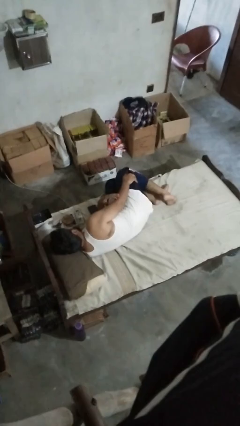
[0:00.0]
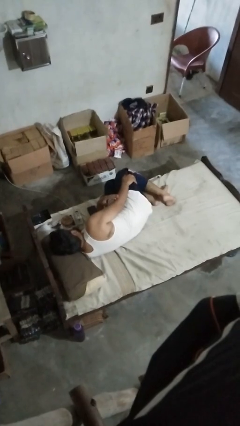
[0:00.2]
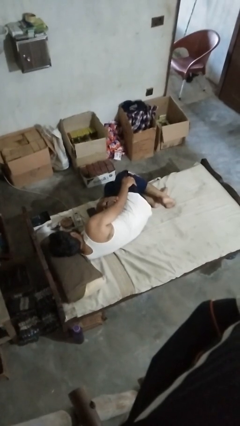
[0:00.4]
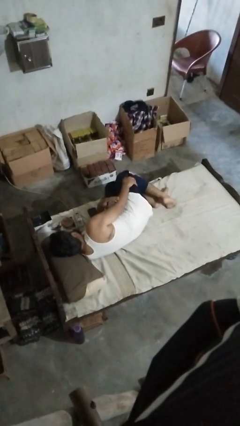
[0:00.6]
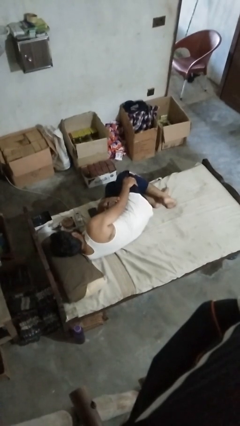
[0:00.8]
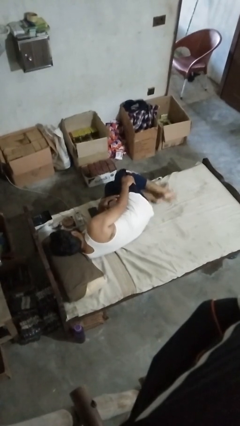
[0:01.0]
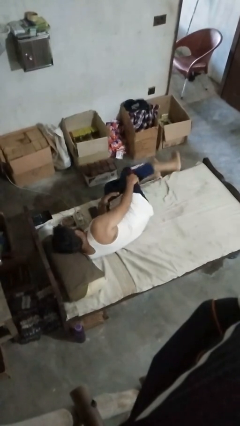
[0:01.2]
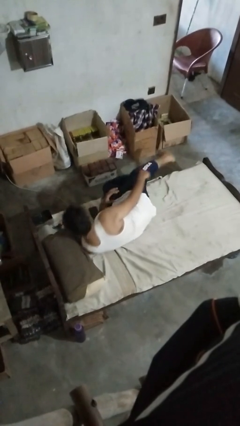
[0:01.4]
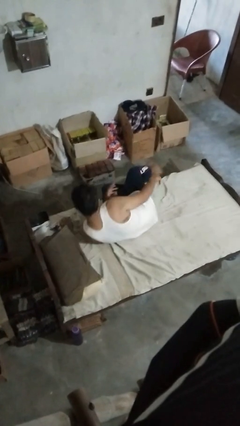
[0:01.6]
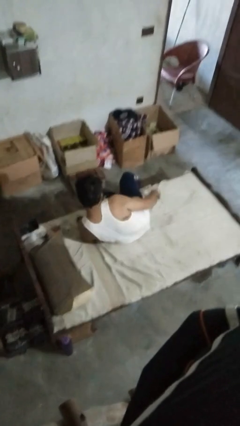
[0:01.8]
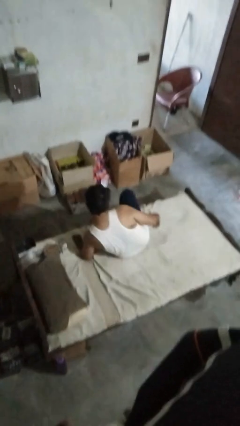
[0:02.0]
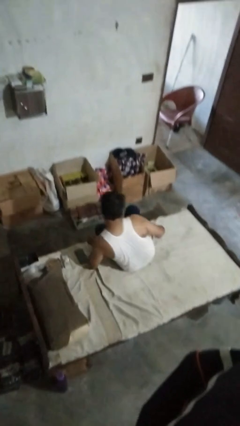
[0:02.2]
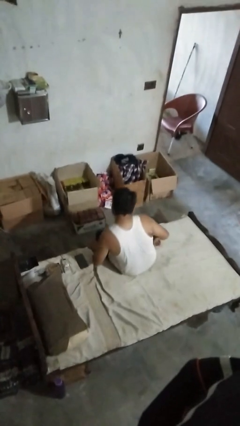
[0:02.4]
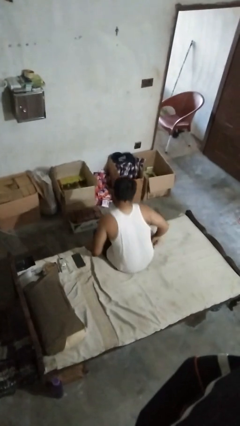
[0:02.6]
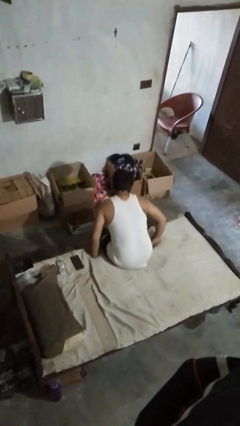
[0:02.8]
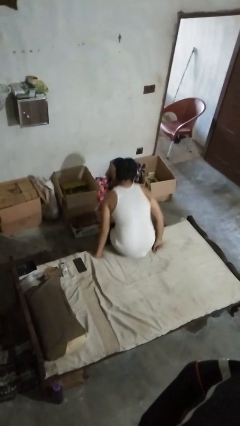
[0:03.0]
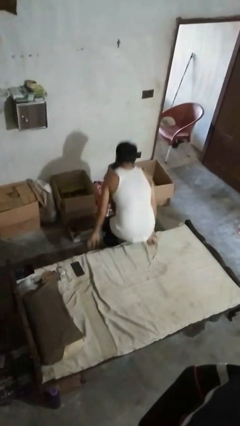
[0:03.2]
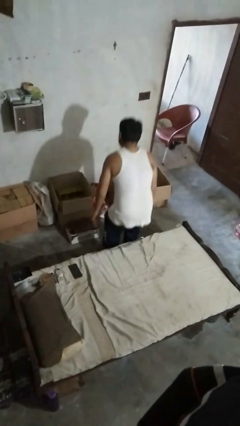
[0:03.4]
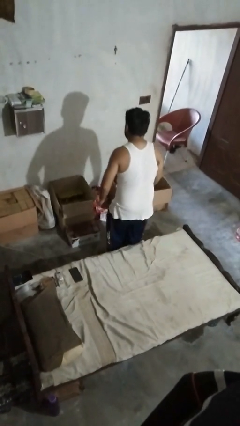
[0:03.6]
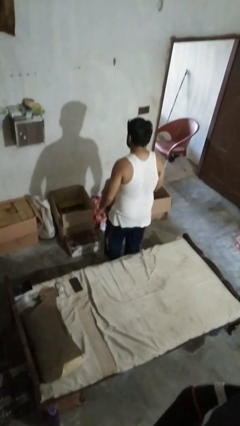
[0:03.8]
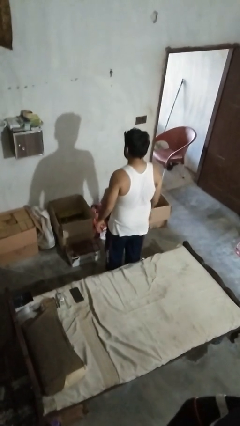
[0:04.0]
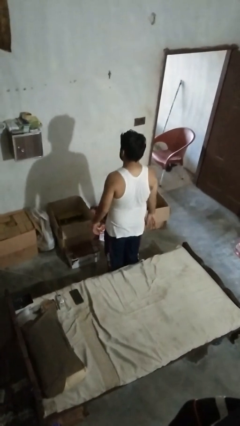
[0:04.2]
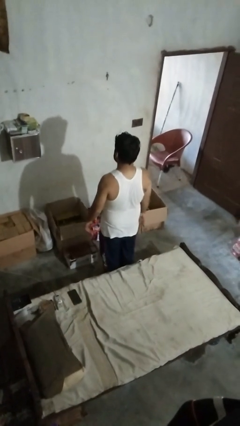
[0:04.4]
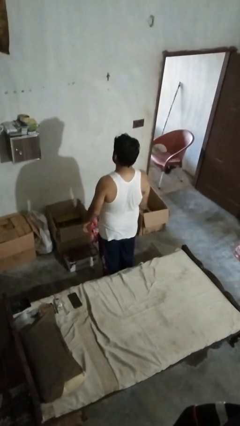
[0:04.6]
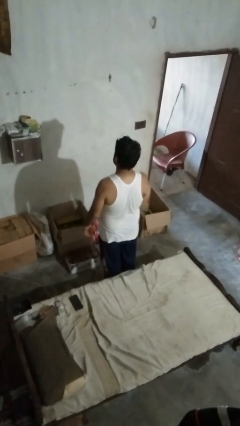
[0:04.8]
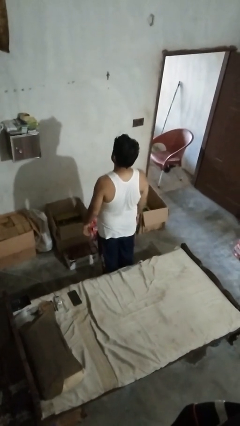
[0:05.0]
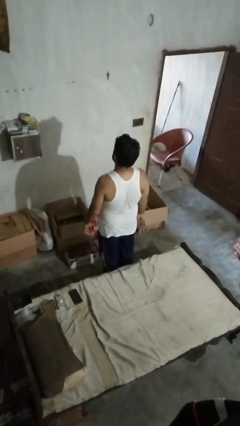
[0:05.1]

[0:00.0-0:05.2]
person stands up

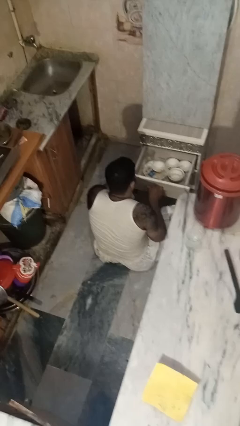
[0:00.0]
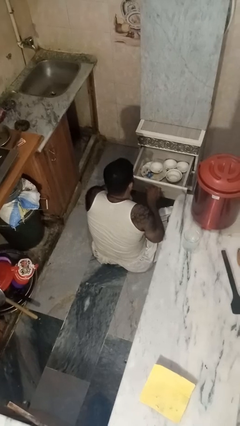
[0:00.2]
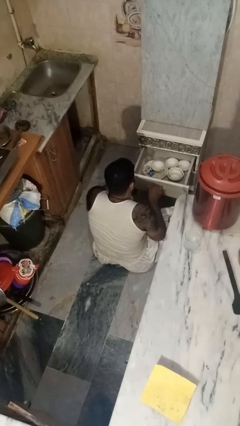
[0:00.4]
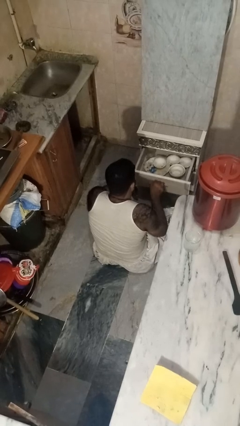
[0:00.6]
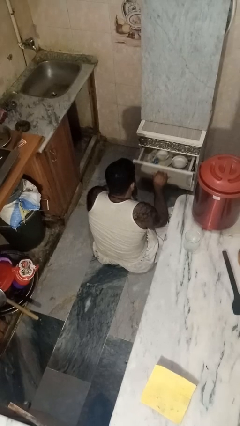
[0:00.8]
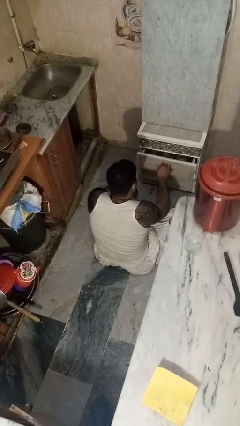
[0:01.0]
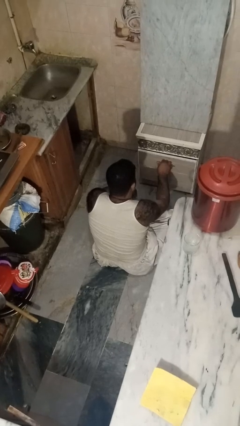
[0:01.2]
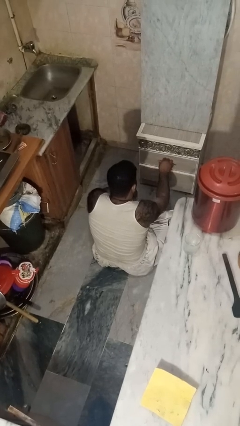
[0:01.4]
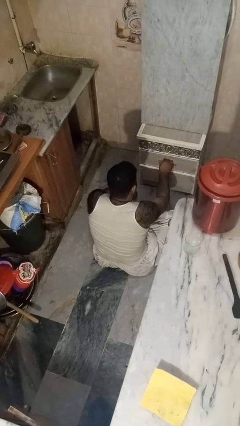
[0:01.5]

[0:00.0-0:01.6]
person closes kitchen drawer

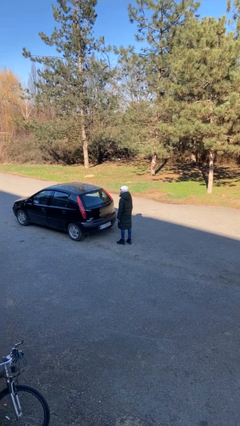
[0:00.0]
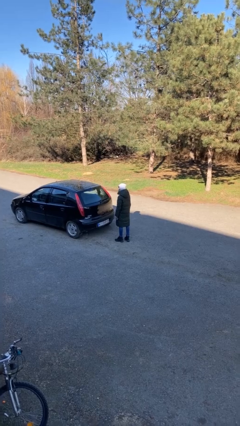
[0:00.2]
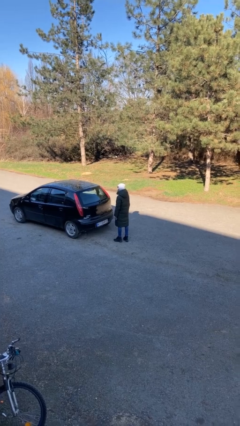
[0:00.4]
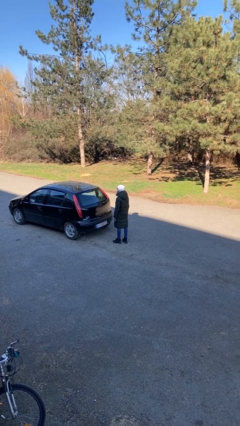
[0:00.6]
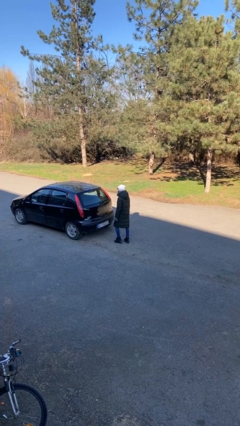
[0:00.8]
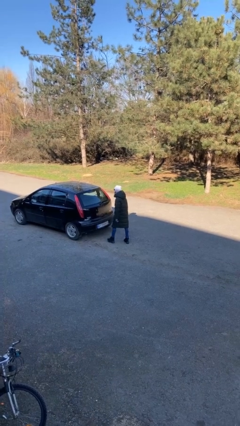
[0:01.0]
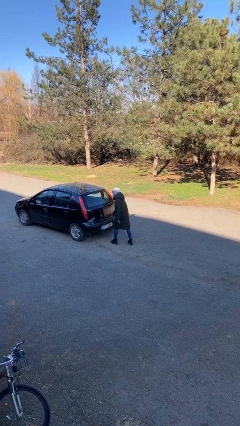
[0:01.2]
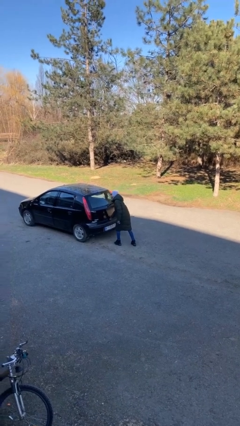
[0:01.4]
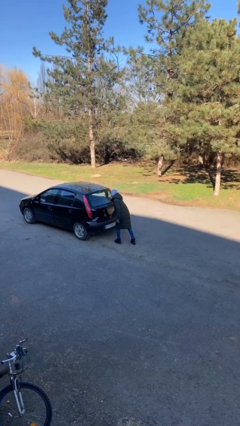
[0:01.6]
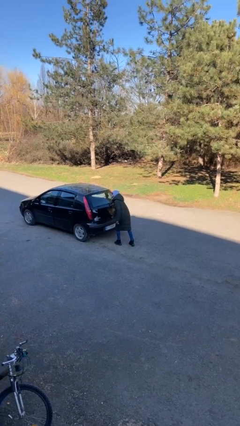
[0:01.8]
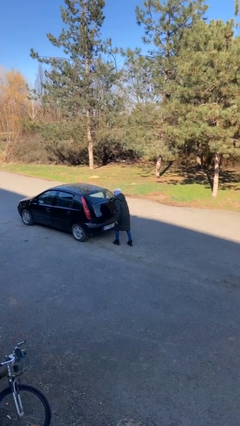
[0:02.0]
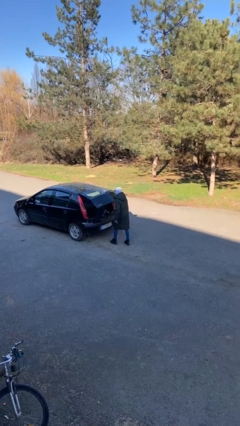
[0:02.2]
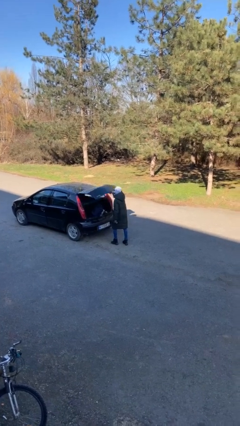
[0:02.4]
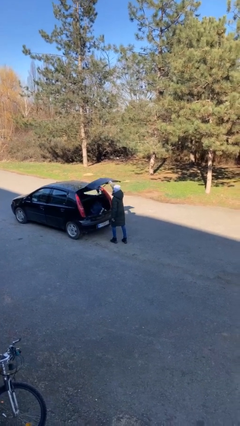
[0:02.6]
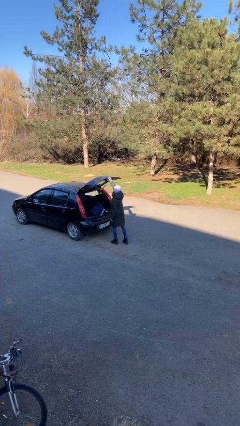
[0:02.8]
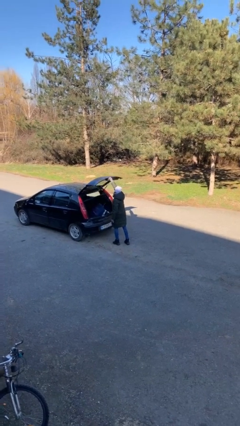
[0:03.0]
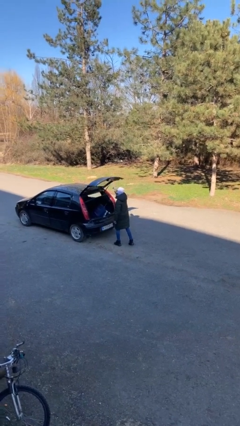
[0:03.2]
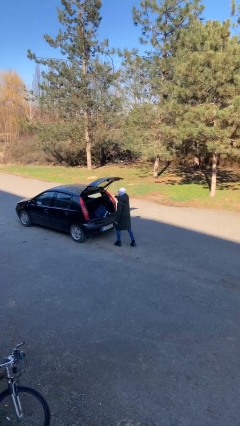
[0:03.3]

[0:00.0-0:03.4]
person opens car trunk

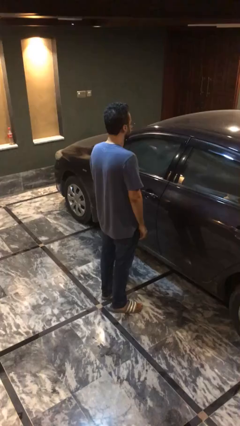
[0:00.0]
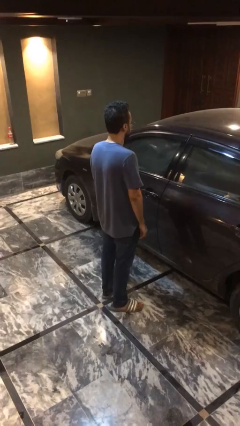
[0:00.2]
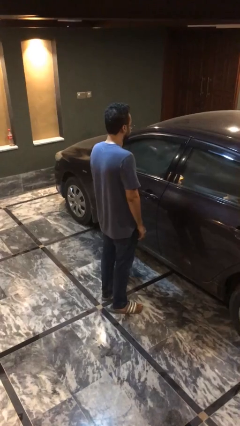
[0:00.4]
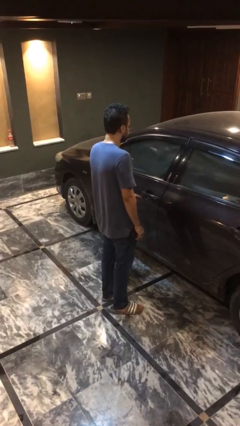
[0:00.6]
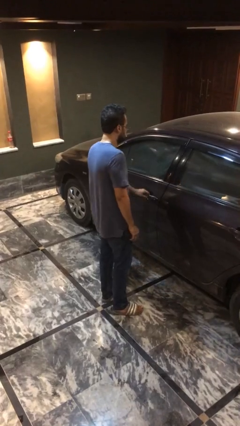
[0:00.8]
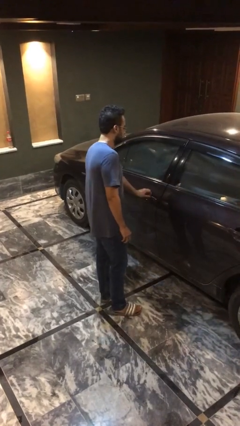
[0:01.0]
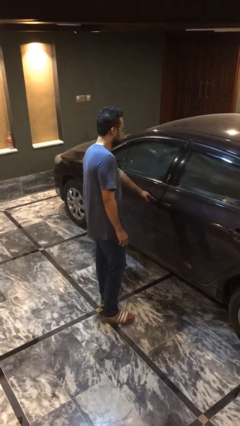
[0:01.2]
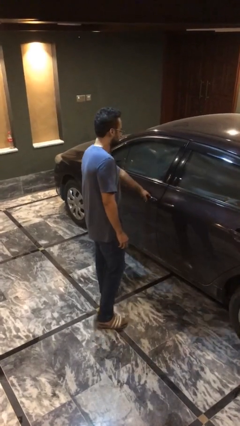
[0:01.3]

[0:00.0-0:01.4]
person opens car door

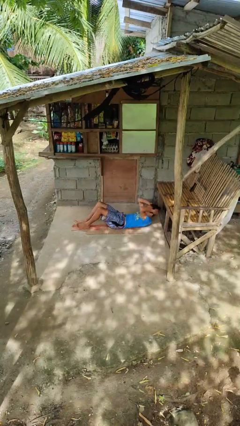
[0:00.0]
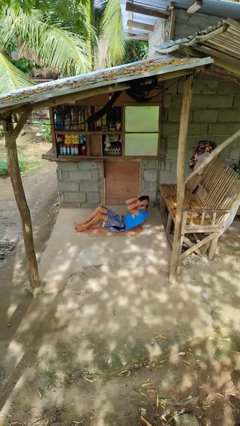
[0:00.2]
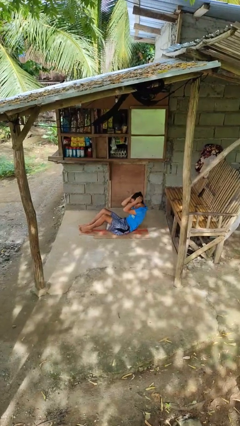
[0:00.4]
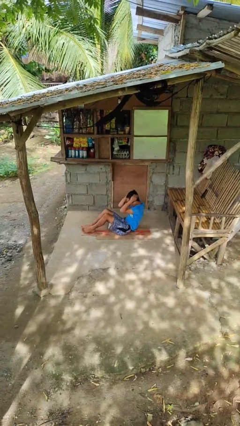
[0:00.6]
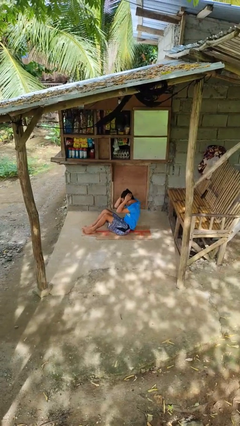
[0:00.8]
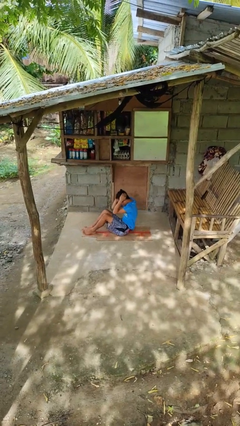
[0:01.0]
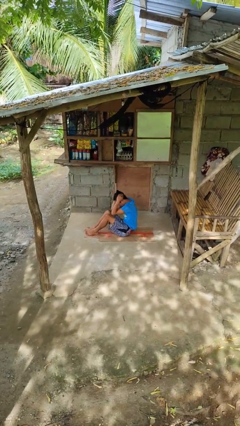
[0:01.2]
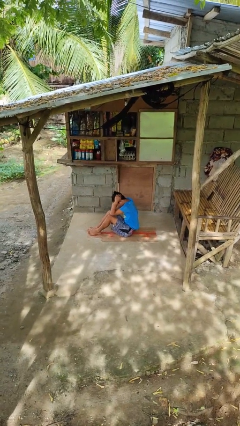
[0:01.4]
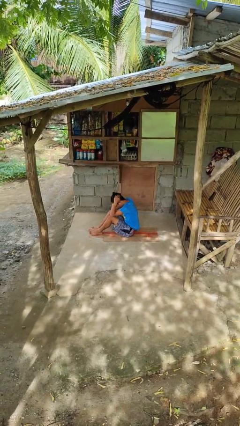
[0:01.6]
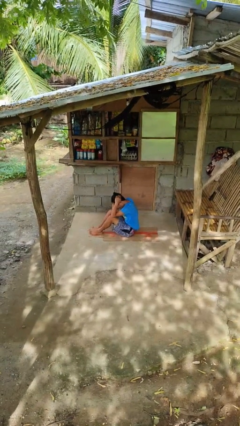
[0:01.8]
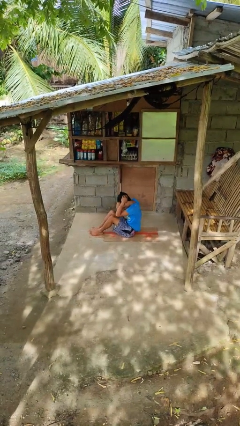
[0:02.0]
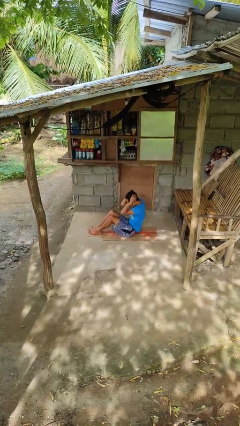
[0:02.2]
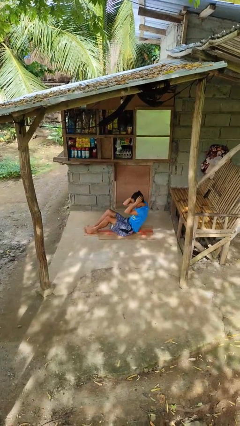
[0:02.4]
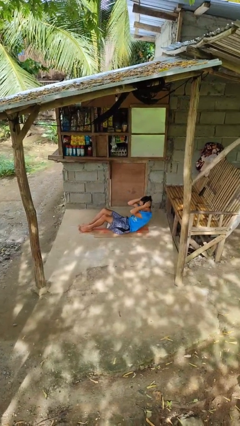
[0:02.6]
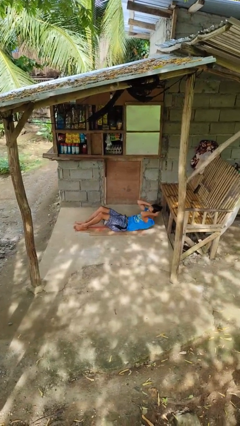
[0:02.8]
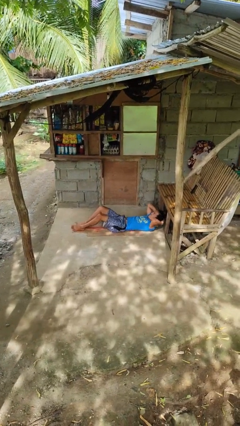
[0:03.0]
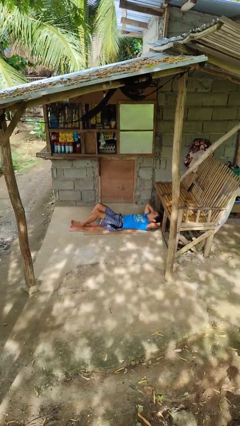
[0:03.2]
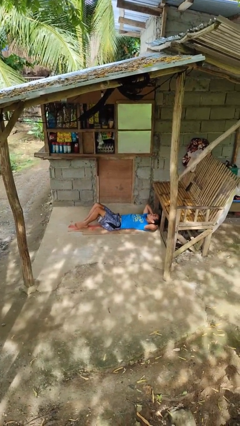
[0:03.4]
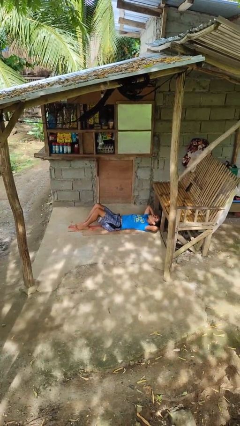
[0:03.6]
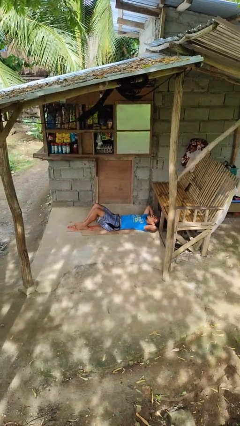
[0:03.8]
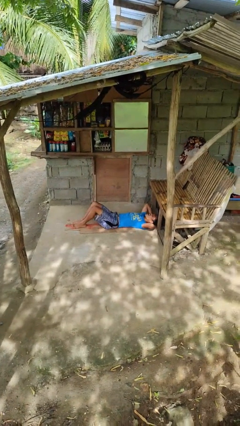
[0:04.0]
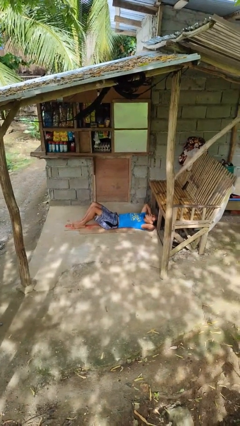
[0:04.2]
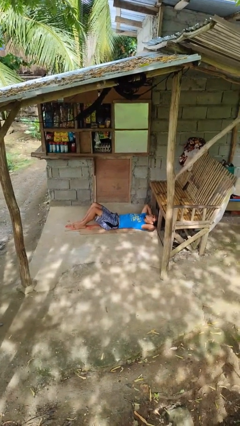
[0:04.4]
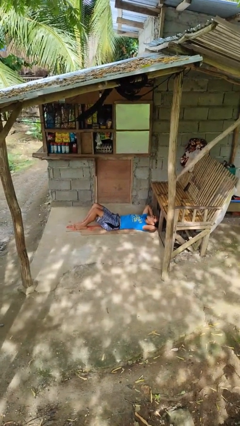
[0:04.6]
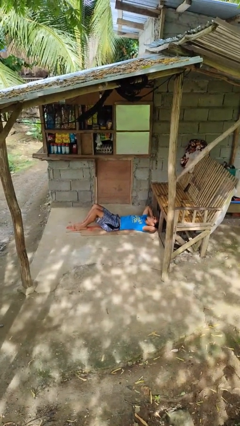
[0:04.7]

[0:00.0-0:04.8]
person exercises with situp

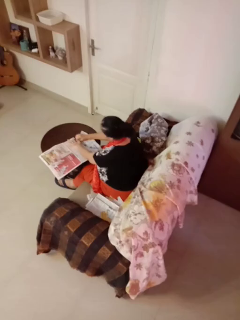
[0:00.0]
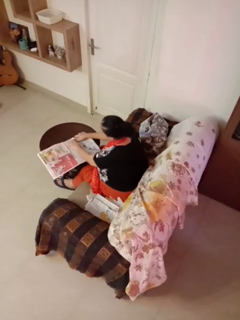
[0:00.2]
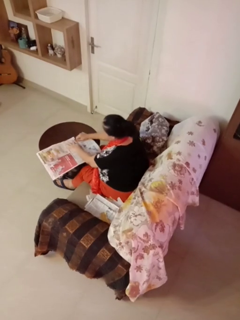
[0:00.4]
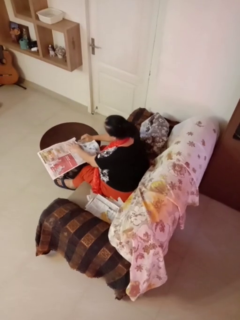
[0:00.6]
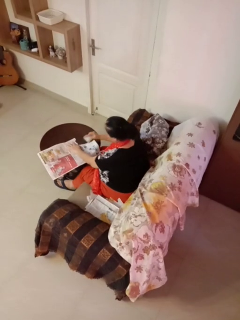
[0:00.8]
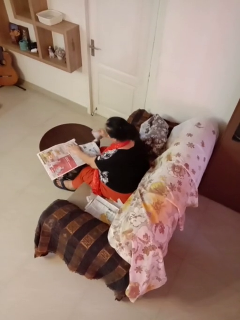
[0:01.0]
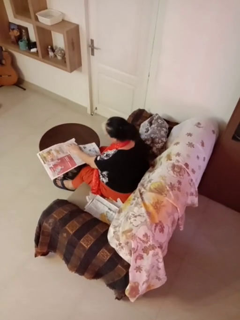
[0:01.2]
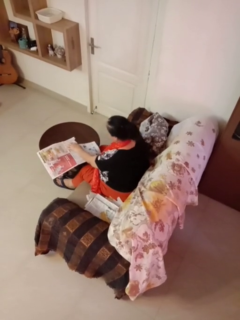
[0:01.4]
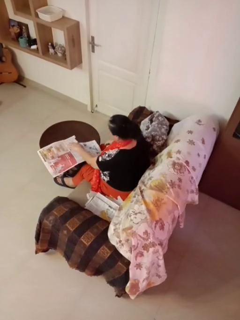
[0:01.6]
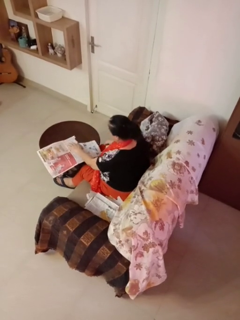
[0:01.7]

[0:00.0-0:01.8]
person tears paper
